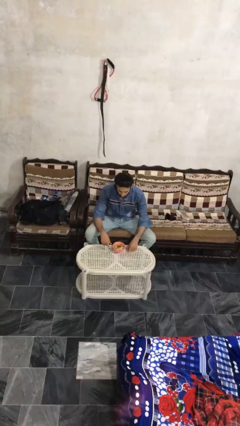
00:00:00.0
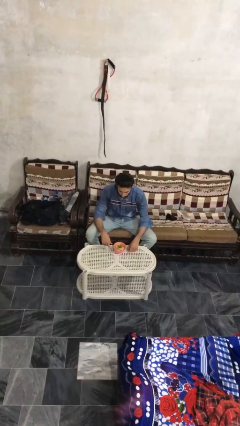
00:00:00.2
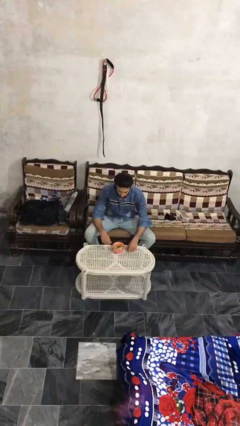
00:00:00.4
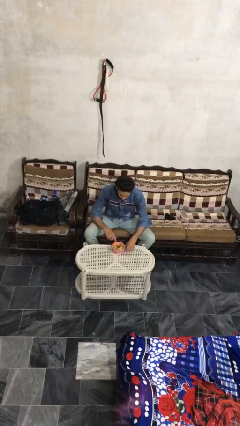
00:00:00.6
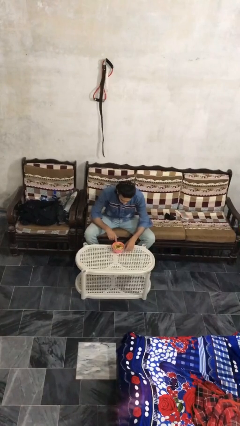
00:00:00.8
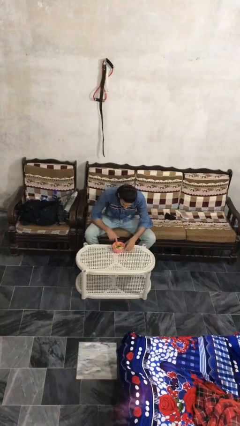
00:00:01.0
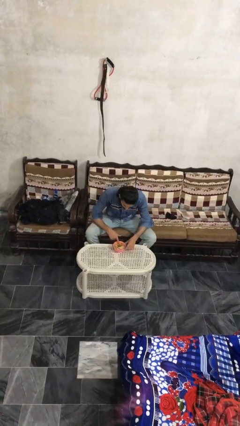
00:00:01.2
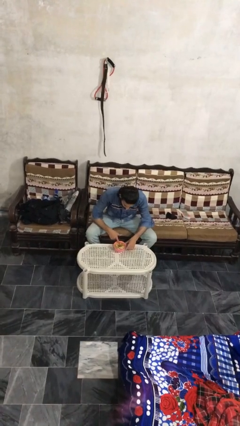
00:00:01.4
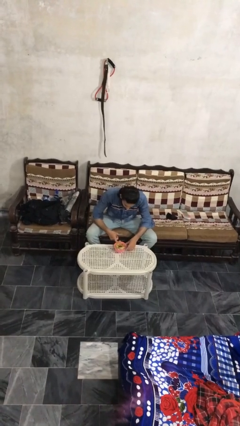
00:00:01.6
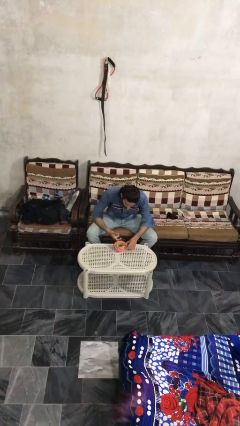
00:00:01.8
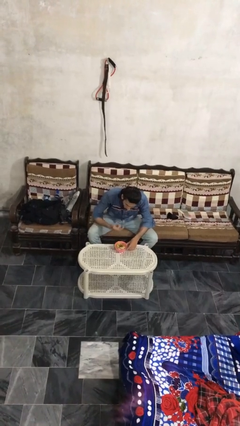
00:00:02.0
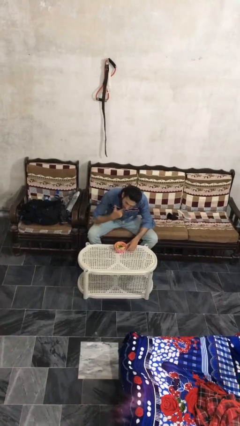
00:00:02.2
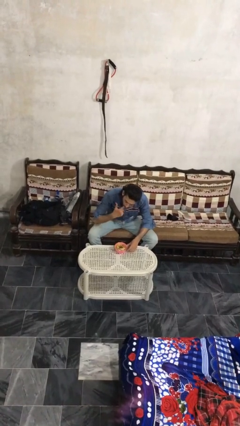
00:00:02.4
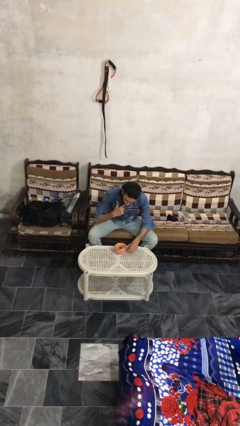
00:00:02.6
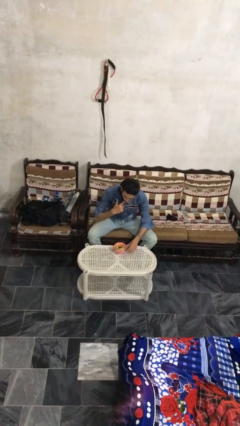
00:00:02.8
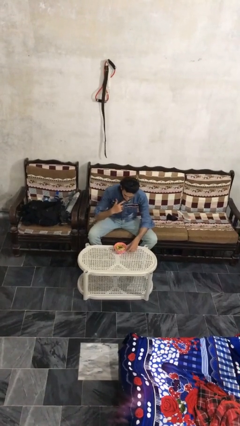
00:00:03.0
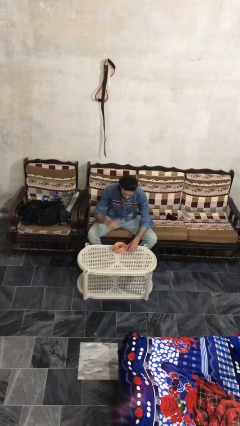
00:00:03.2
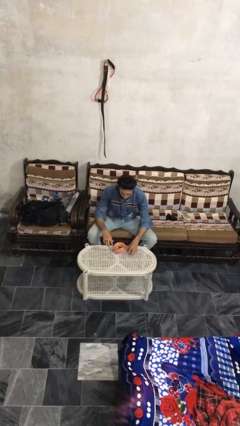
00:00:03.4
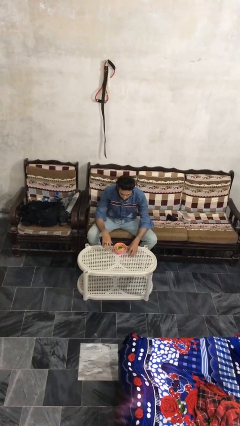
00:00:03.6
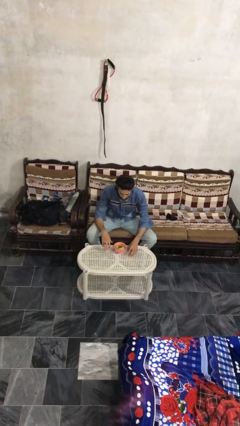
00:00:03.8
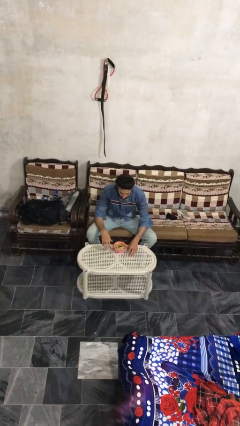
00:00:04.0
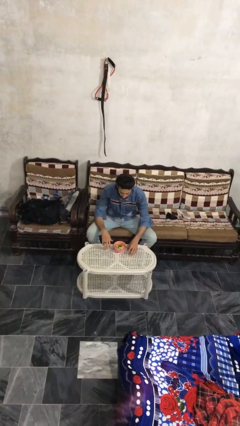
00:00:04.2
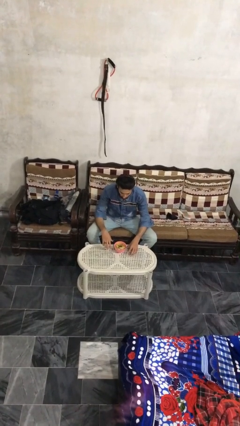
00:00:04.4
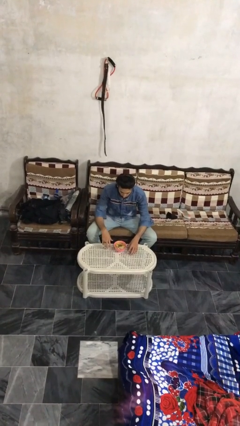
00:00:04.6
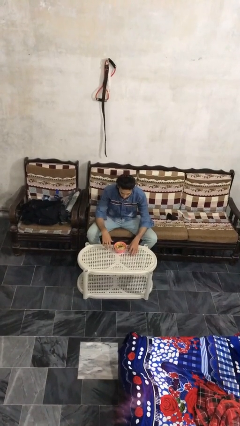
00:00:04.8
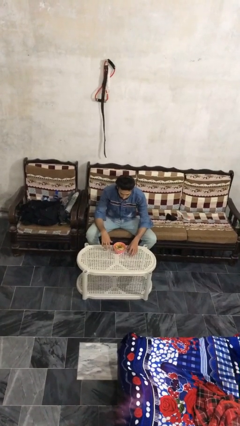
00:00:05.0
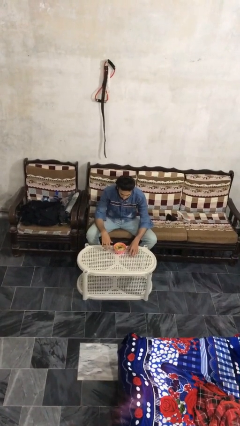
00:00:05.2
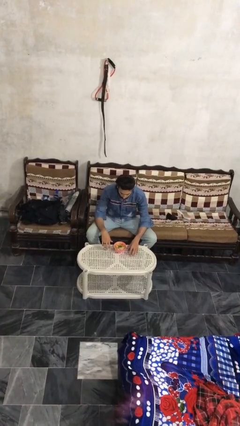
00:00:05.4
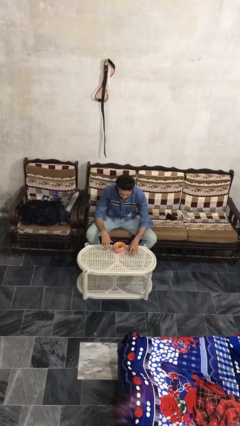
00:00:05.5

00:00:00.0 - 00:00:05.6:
person eats with hands

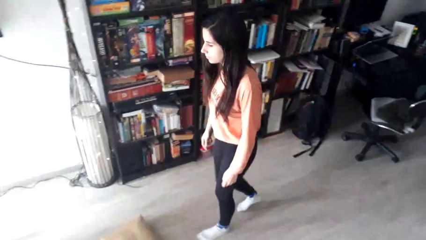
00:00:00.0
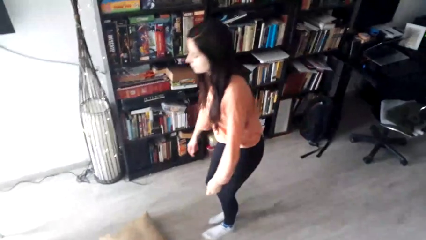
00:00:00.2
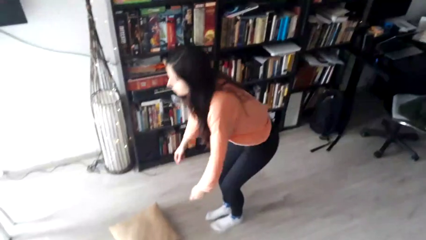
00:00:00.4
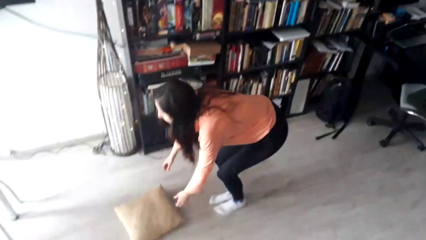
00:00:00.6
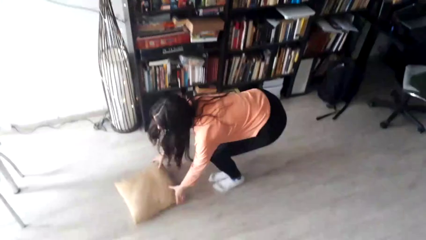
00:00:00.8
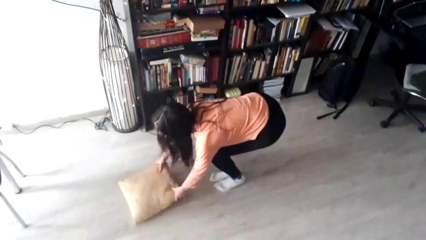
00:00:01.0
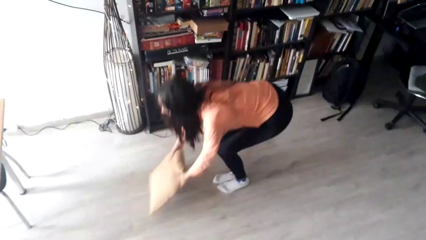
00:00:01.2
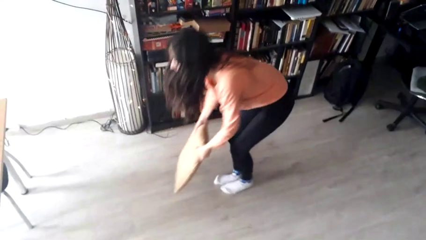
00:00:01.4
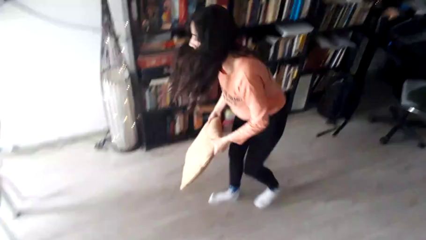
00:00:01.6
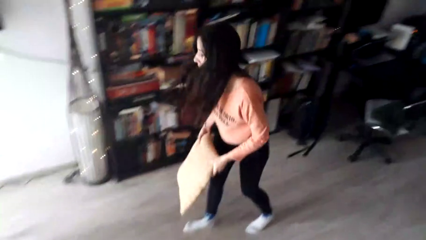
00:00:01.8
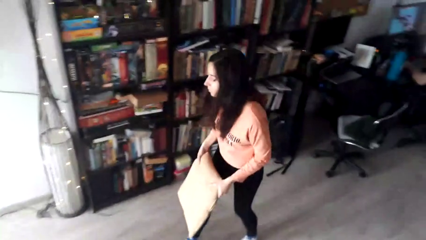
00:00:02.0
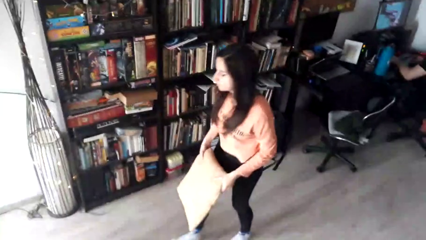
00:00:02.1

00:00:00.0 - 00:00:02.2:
person picks up object from floor

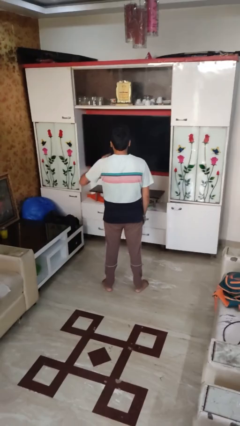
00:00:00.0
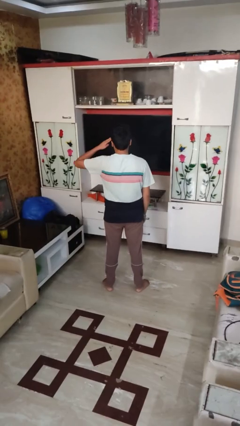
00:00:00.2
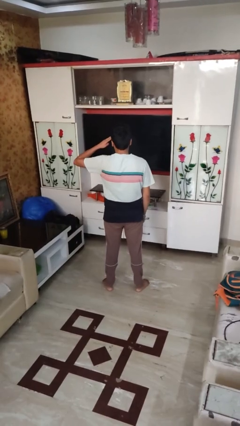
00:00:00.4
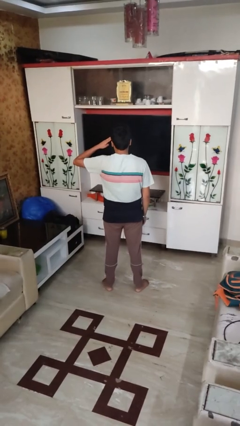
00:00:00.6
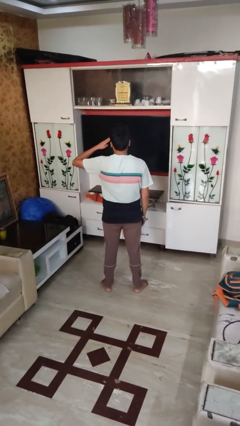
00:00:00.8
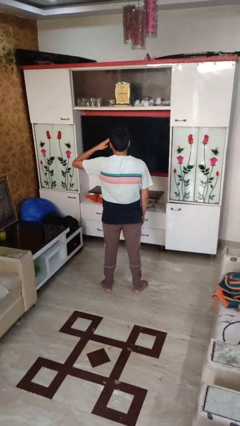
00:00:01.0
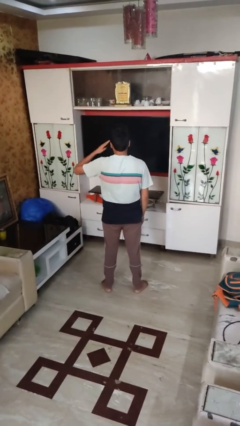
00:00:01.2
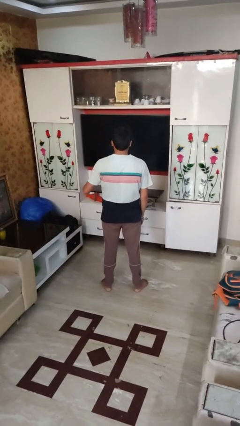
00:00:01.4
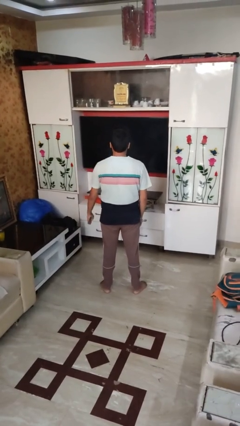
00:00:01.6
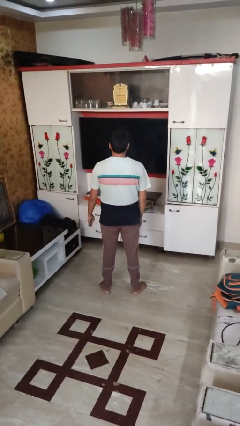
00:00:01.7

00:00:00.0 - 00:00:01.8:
person salutes

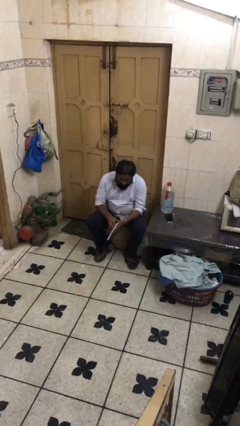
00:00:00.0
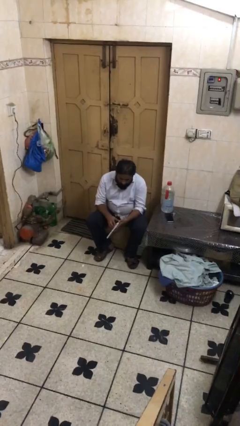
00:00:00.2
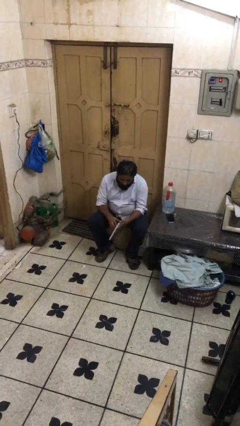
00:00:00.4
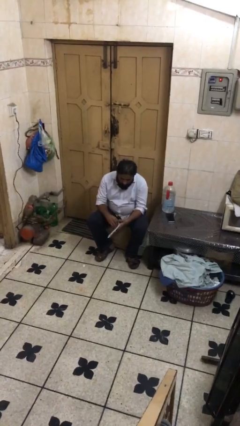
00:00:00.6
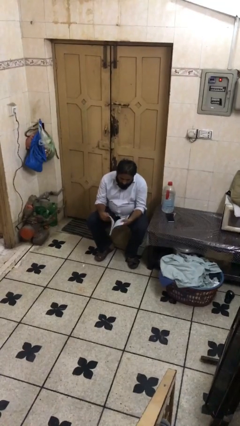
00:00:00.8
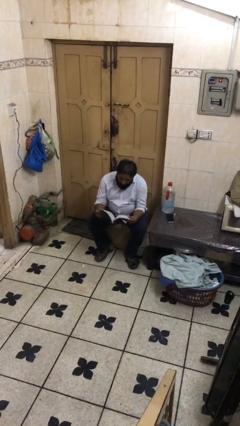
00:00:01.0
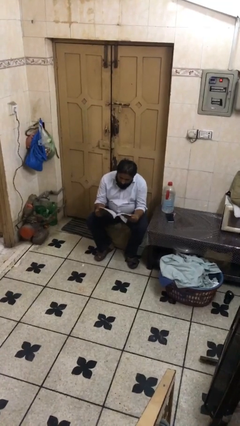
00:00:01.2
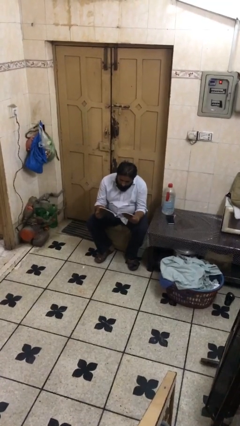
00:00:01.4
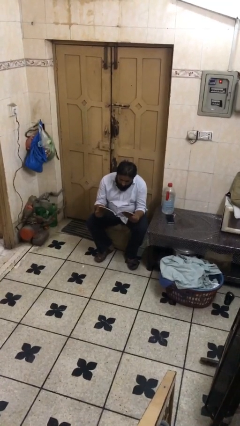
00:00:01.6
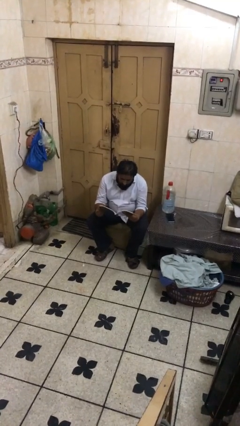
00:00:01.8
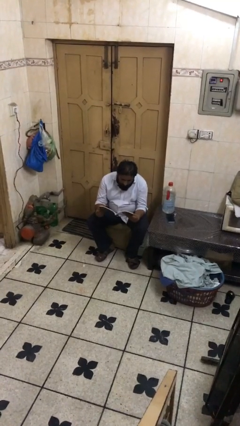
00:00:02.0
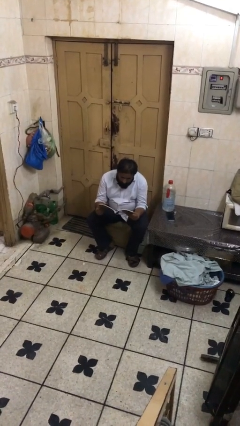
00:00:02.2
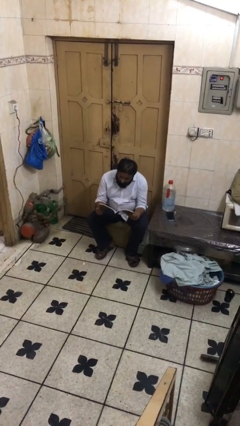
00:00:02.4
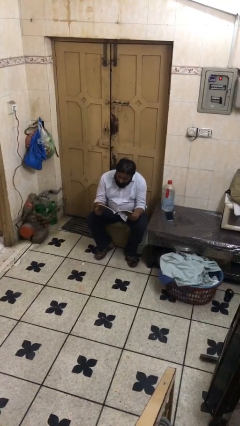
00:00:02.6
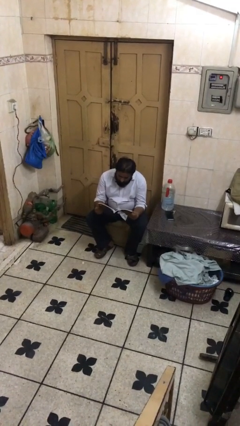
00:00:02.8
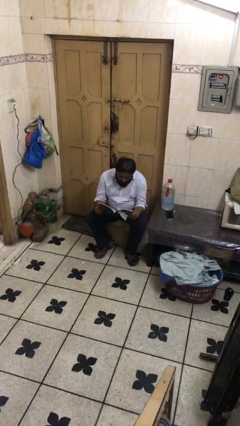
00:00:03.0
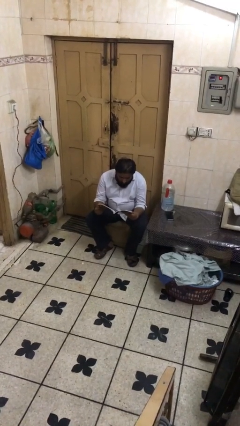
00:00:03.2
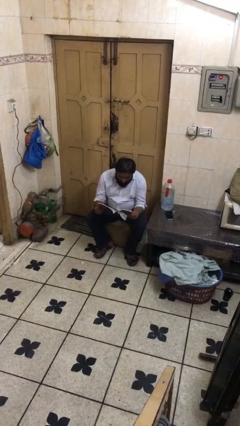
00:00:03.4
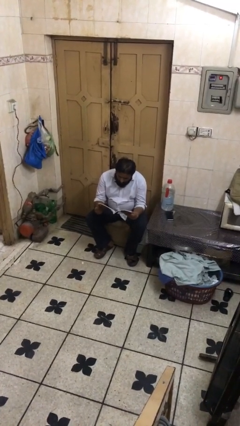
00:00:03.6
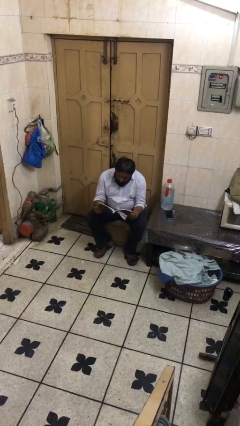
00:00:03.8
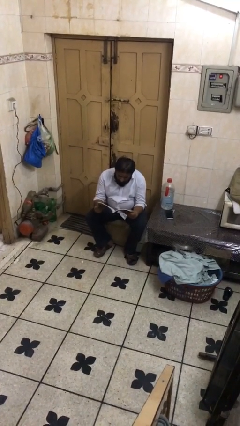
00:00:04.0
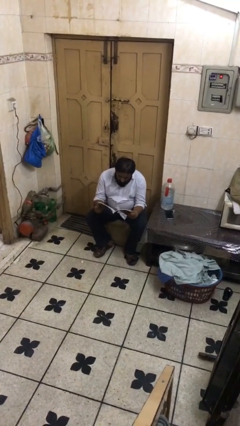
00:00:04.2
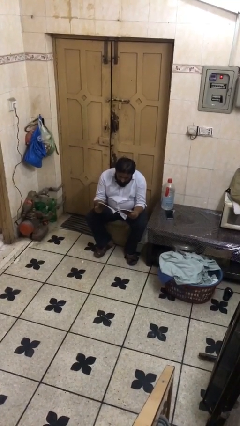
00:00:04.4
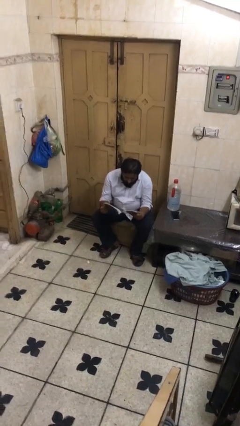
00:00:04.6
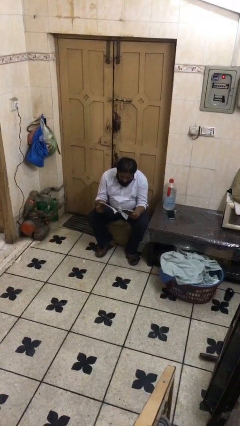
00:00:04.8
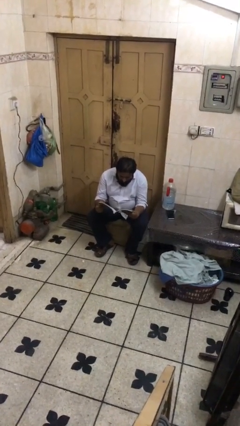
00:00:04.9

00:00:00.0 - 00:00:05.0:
person reads document

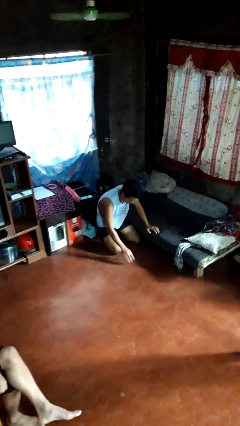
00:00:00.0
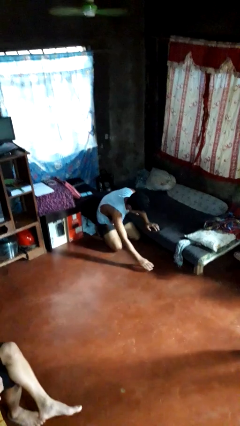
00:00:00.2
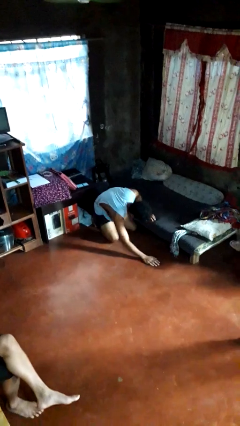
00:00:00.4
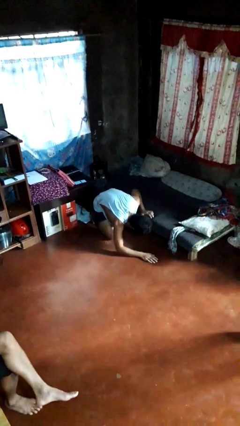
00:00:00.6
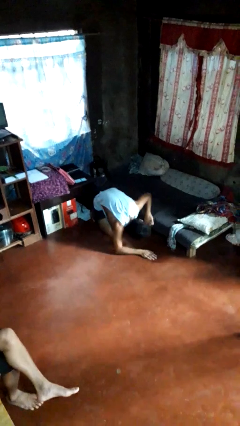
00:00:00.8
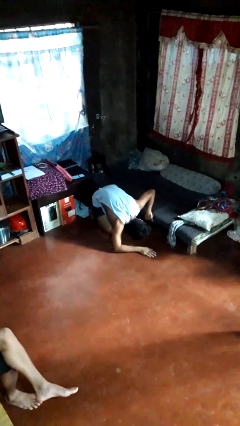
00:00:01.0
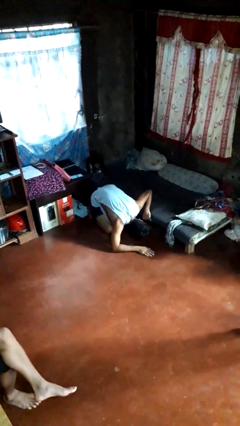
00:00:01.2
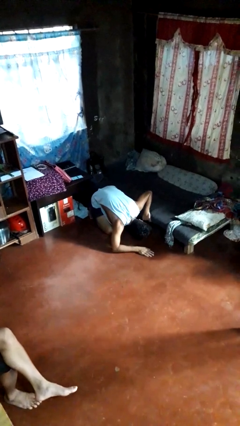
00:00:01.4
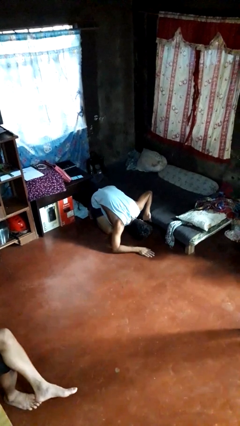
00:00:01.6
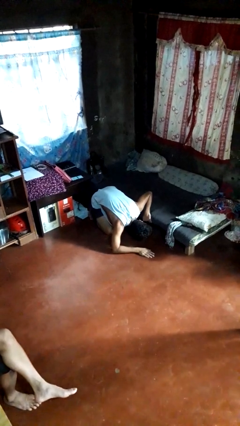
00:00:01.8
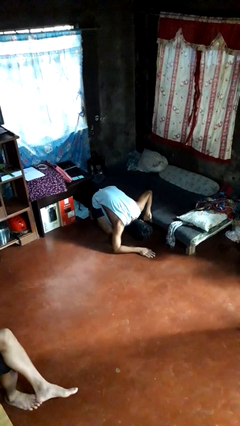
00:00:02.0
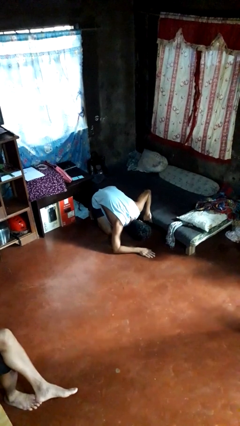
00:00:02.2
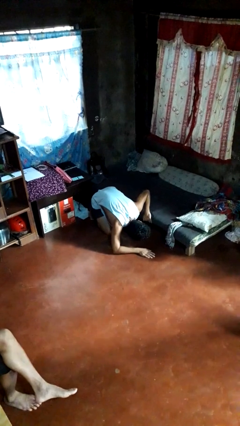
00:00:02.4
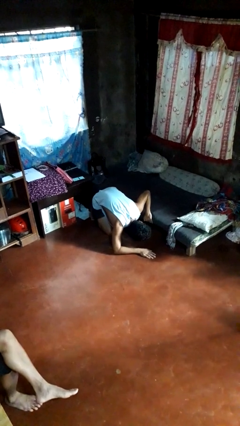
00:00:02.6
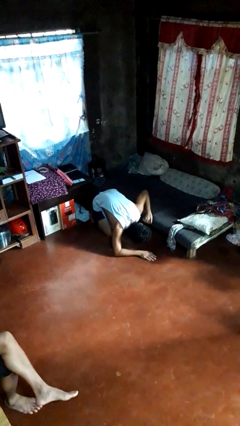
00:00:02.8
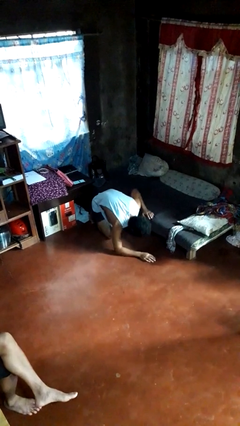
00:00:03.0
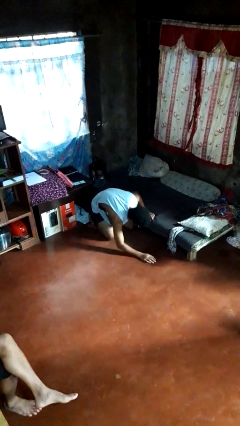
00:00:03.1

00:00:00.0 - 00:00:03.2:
person searches under bed
